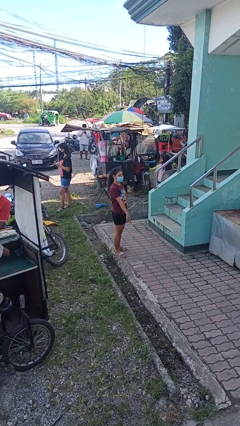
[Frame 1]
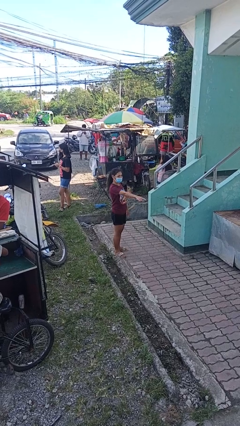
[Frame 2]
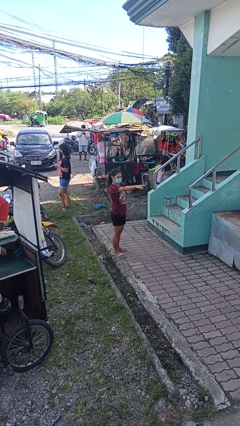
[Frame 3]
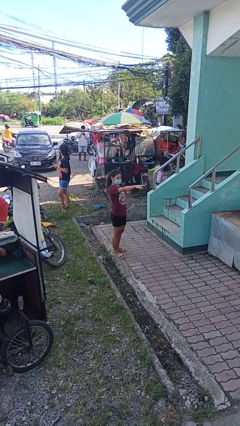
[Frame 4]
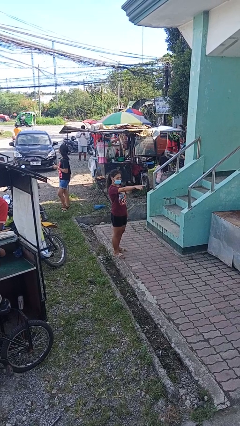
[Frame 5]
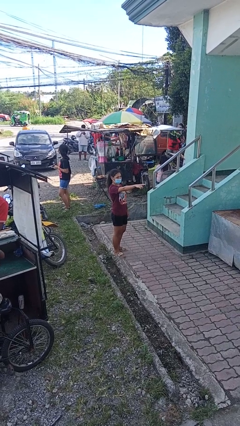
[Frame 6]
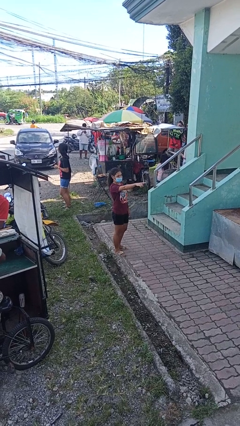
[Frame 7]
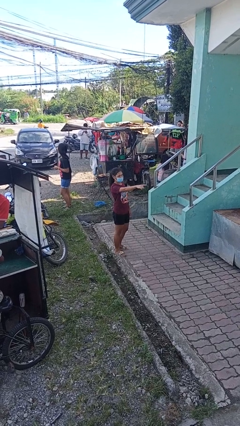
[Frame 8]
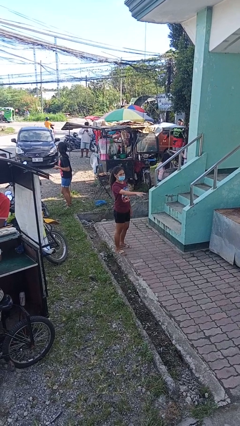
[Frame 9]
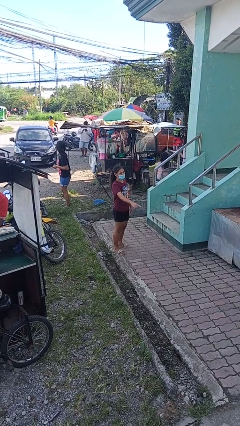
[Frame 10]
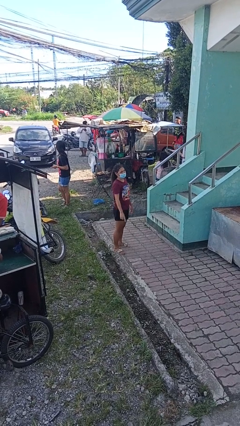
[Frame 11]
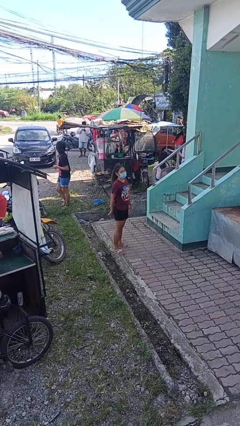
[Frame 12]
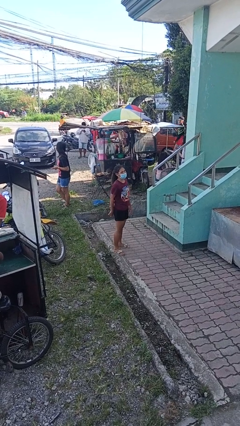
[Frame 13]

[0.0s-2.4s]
person points at person

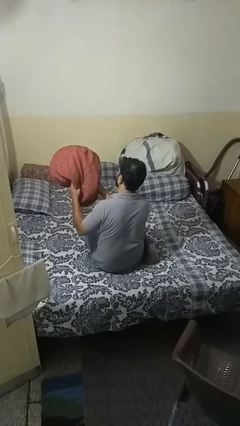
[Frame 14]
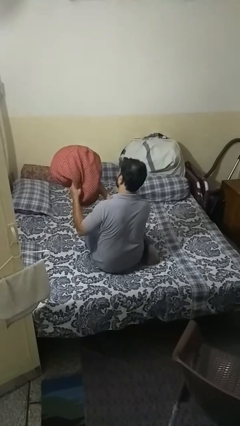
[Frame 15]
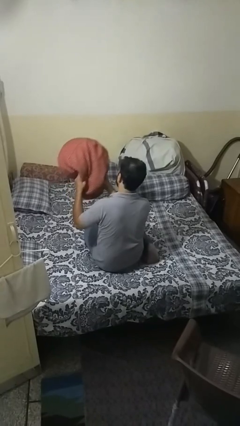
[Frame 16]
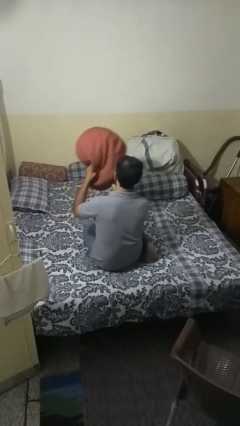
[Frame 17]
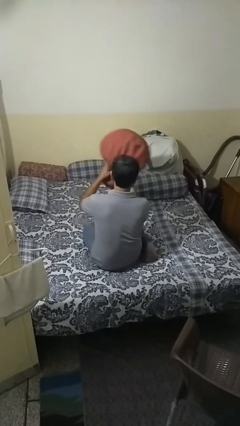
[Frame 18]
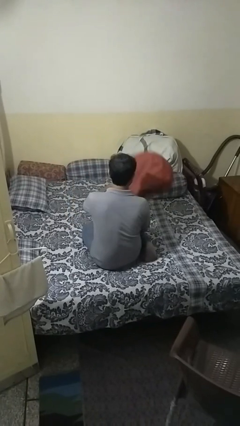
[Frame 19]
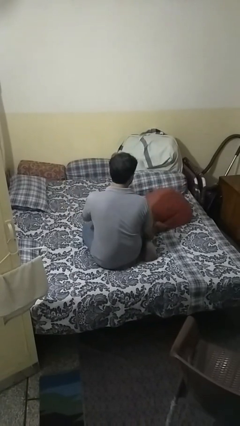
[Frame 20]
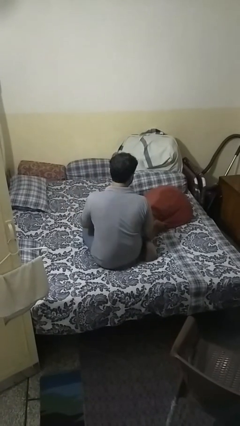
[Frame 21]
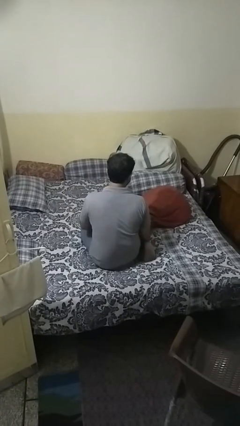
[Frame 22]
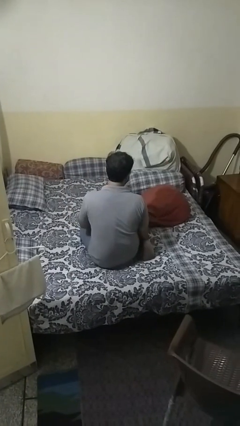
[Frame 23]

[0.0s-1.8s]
person puts down object on bed

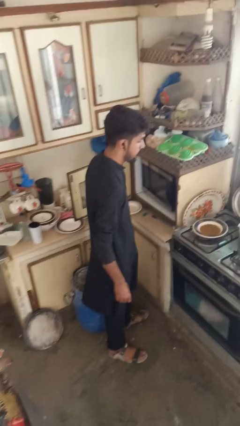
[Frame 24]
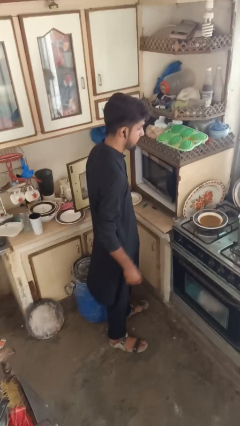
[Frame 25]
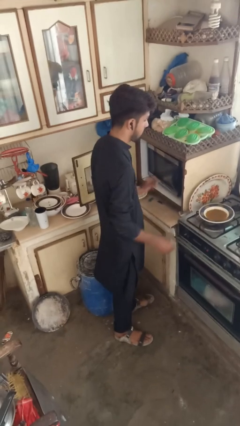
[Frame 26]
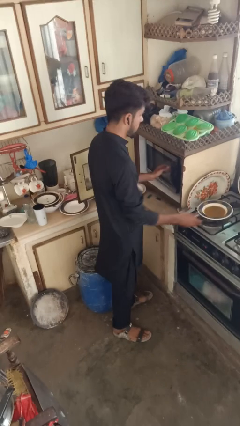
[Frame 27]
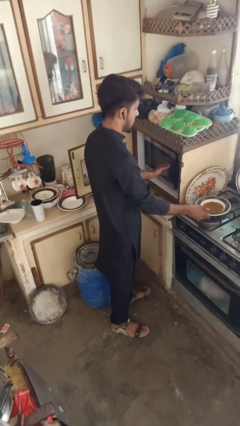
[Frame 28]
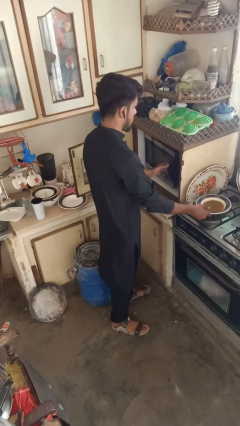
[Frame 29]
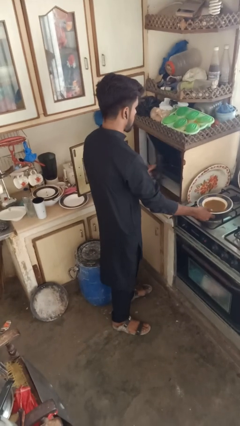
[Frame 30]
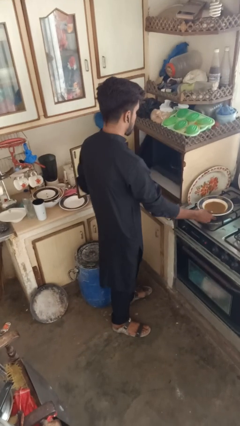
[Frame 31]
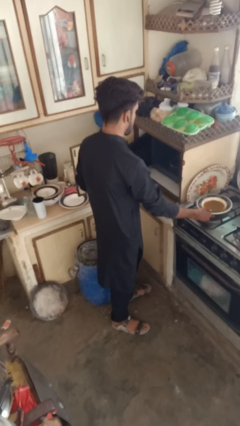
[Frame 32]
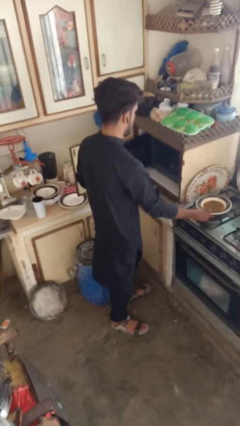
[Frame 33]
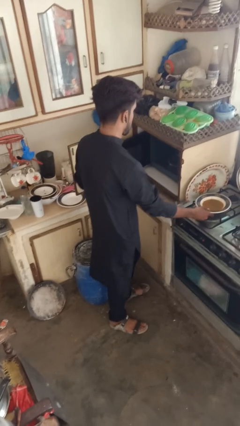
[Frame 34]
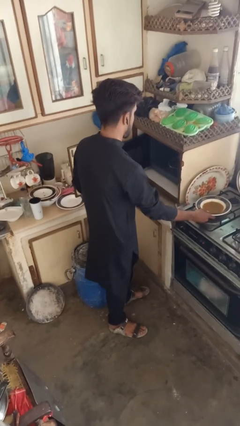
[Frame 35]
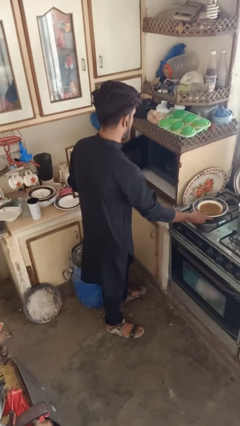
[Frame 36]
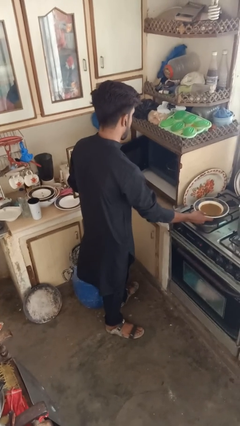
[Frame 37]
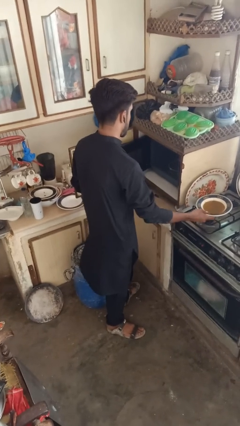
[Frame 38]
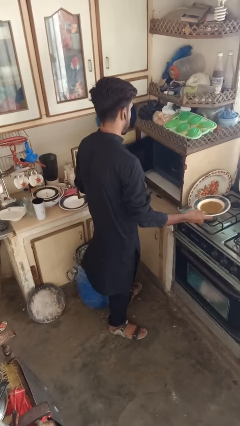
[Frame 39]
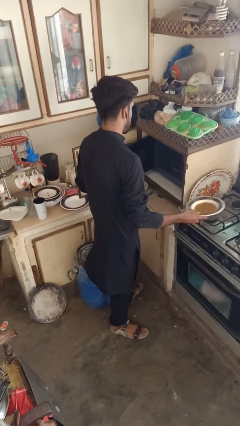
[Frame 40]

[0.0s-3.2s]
person opens microwave

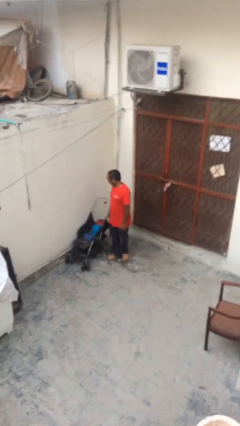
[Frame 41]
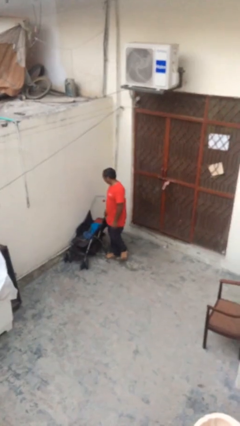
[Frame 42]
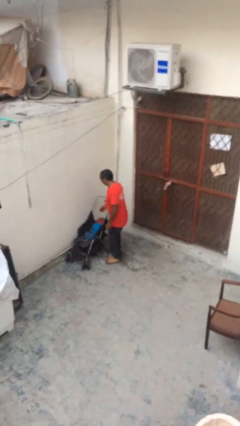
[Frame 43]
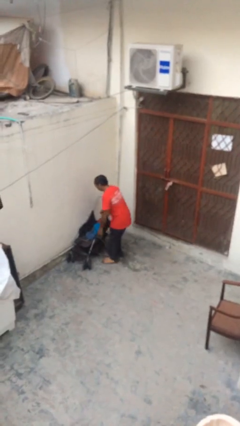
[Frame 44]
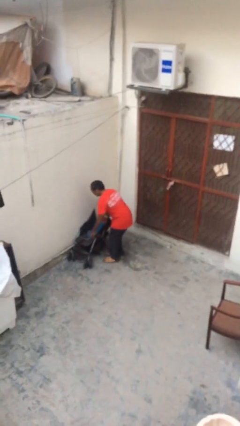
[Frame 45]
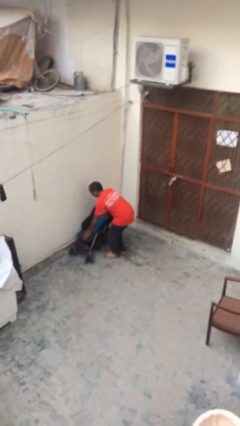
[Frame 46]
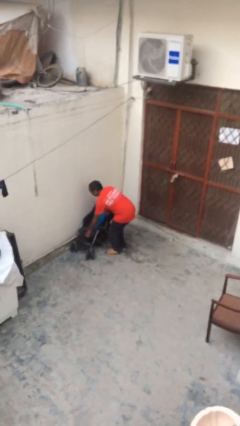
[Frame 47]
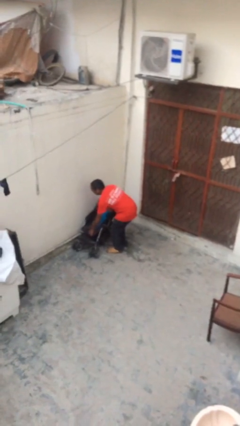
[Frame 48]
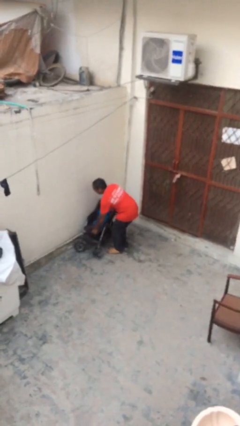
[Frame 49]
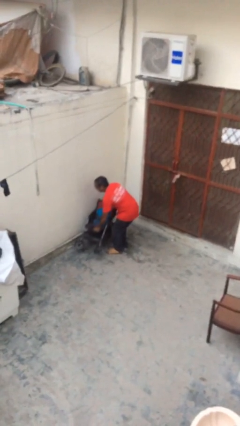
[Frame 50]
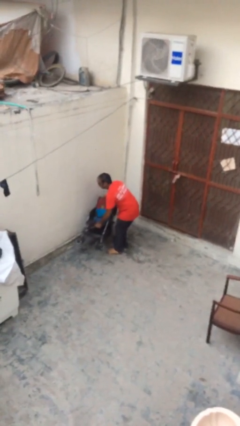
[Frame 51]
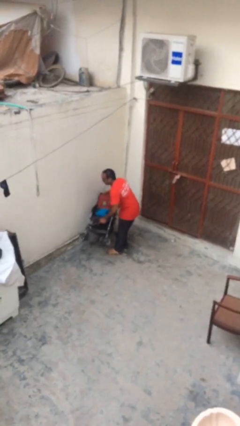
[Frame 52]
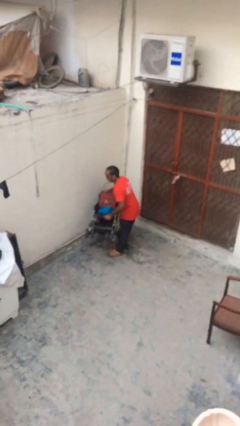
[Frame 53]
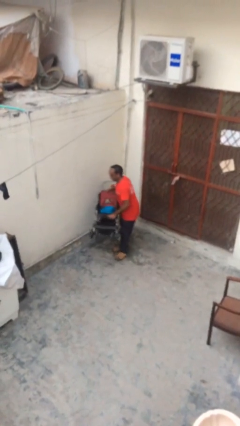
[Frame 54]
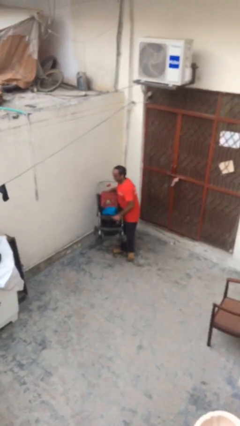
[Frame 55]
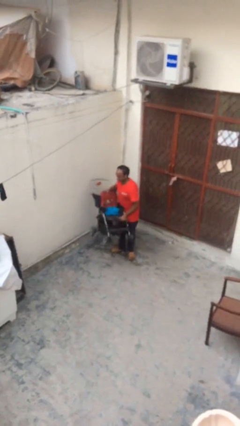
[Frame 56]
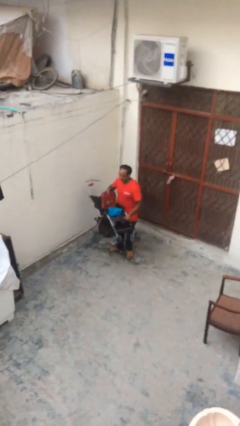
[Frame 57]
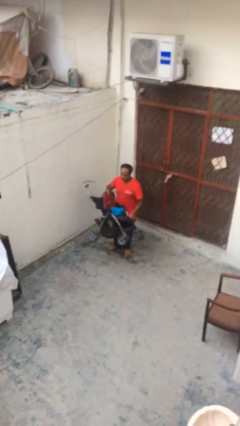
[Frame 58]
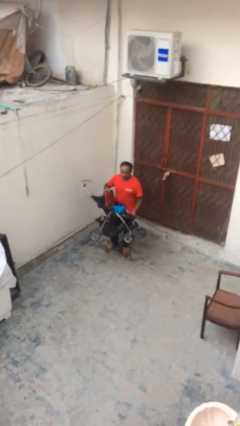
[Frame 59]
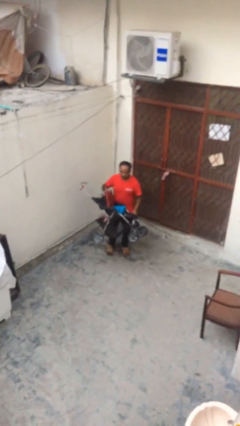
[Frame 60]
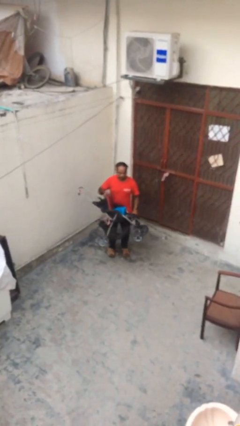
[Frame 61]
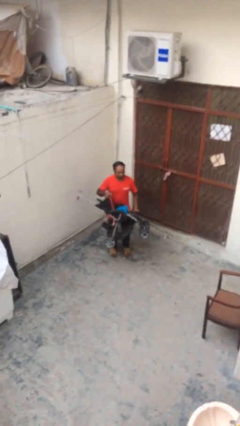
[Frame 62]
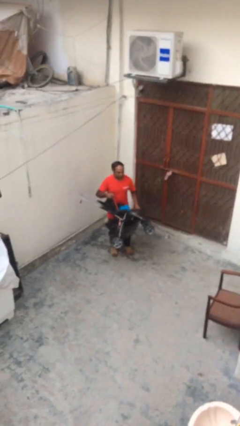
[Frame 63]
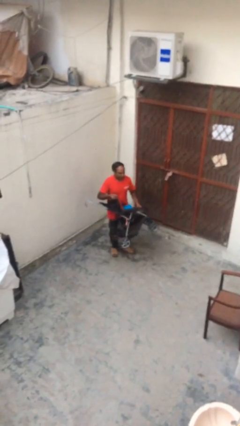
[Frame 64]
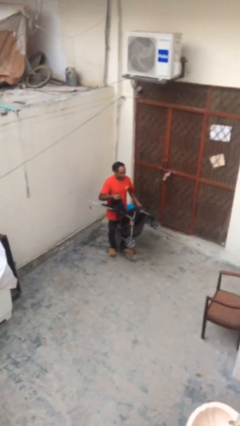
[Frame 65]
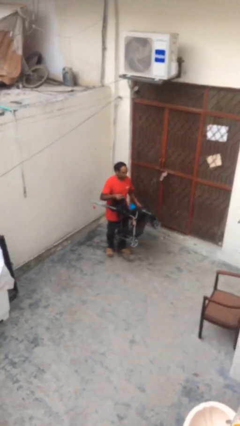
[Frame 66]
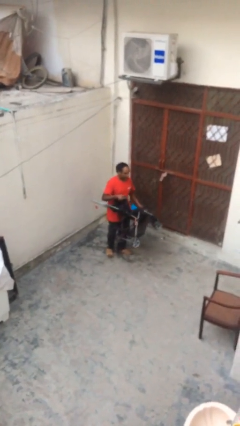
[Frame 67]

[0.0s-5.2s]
person picks up object from floor

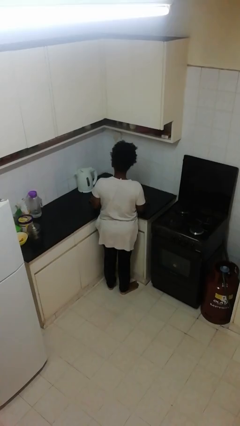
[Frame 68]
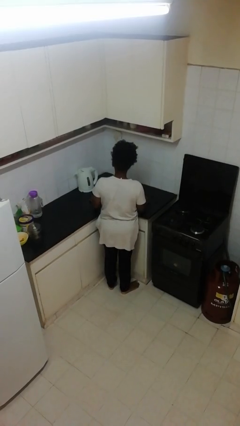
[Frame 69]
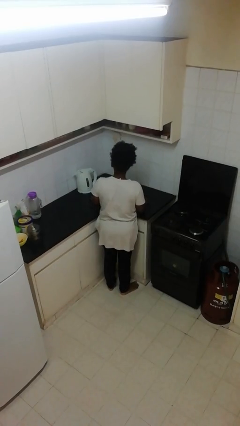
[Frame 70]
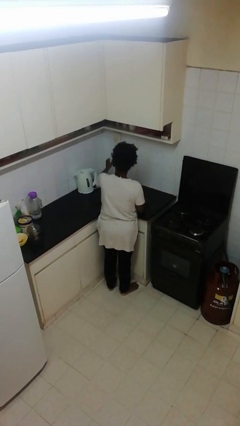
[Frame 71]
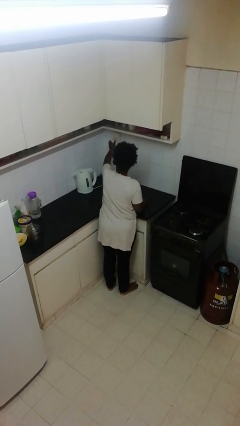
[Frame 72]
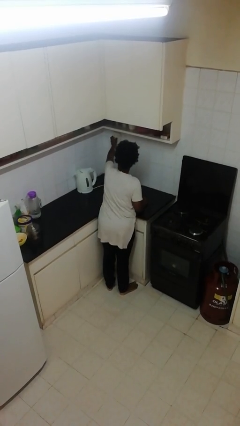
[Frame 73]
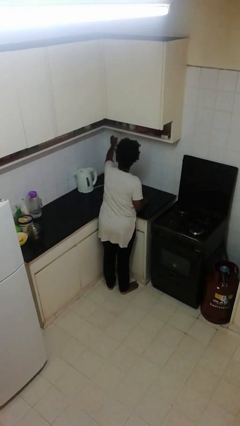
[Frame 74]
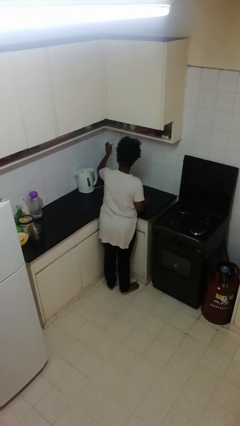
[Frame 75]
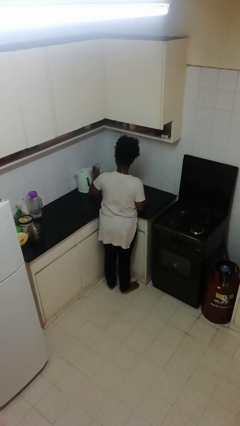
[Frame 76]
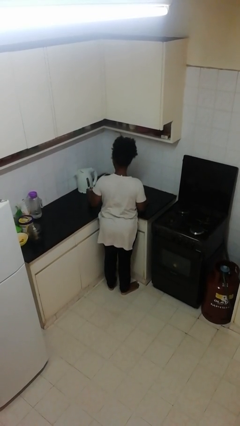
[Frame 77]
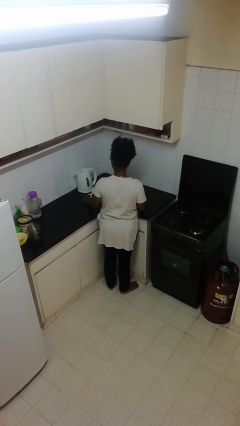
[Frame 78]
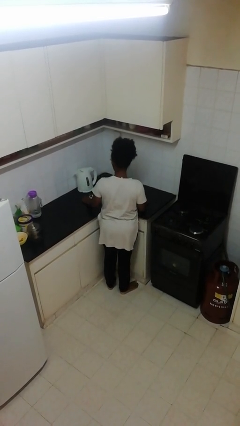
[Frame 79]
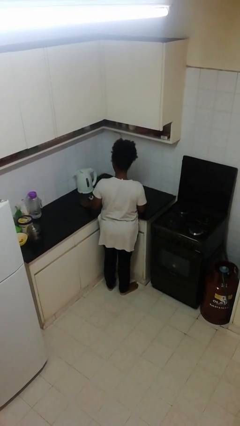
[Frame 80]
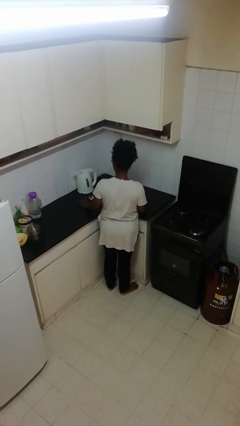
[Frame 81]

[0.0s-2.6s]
person unplugs from electrical socket

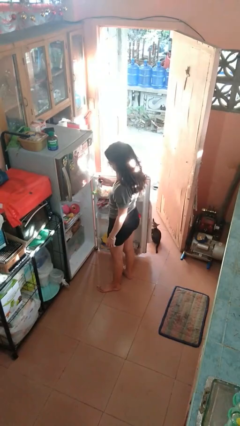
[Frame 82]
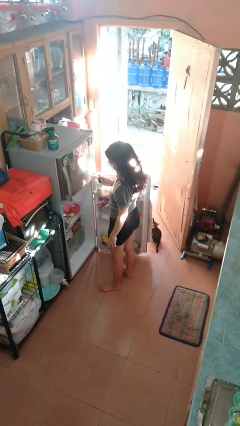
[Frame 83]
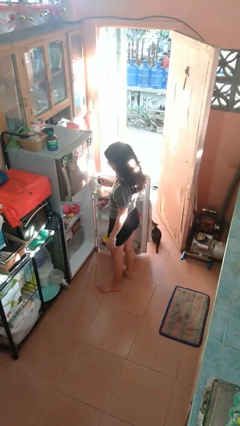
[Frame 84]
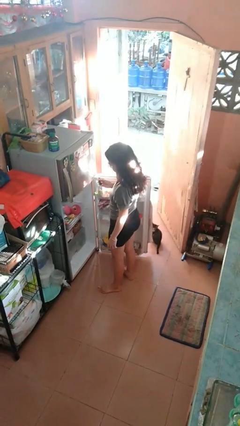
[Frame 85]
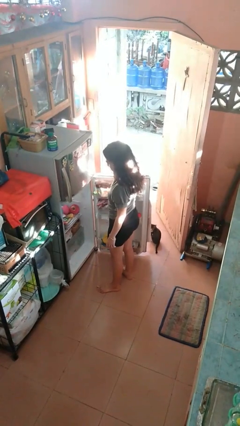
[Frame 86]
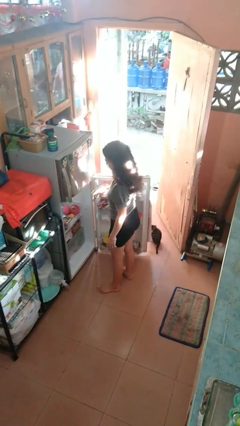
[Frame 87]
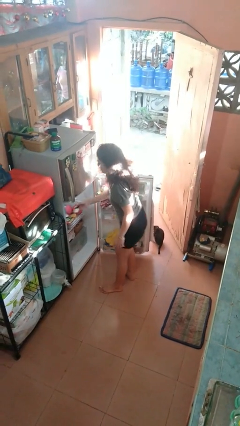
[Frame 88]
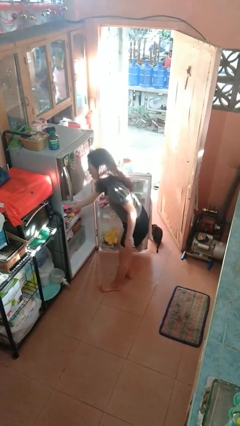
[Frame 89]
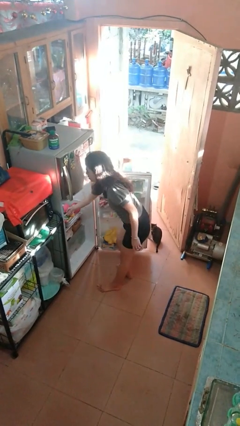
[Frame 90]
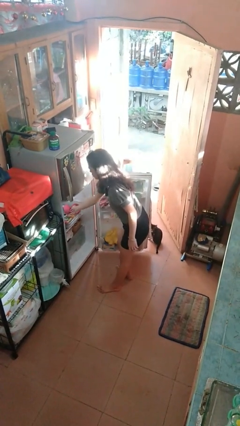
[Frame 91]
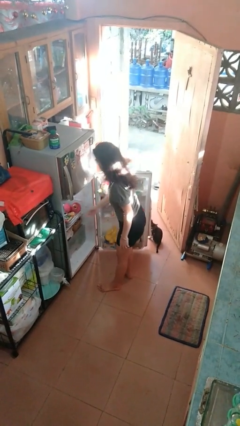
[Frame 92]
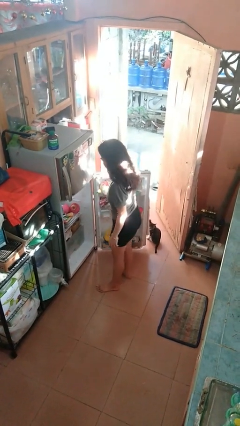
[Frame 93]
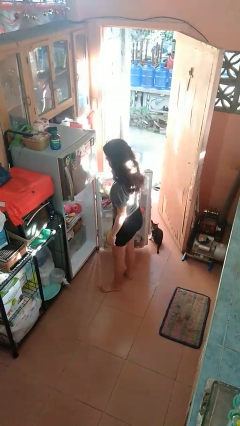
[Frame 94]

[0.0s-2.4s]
person puts object into refrigerator
